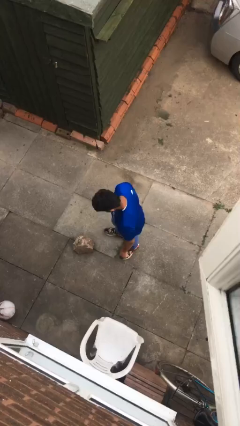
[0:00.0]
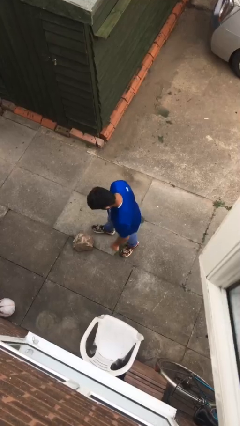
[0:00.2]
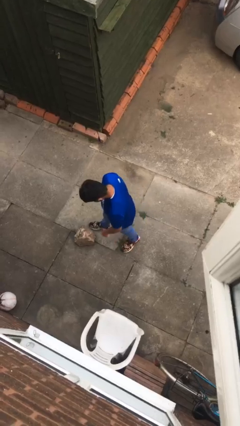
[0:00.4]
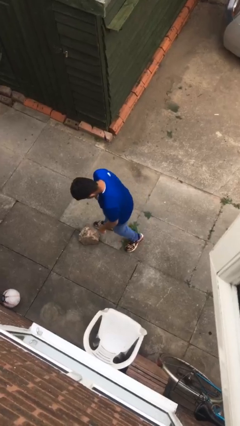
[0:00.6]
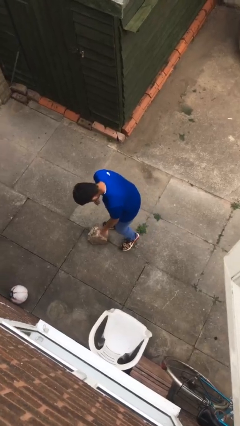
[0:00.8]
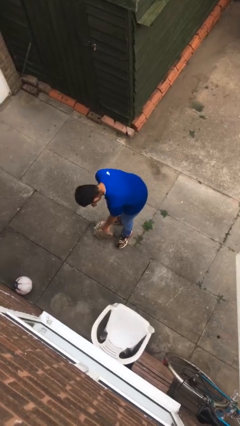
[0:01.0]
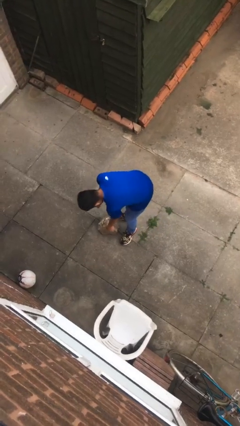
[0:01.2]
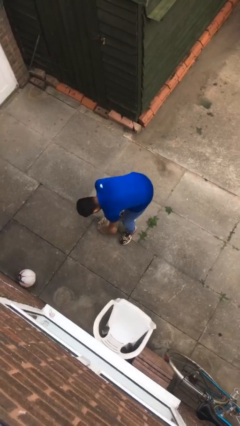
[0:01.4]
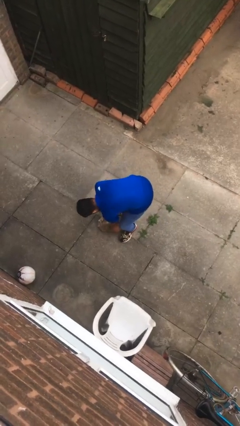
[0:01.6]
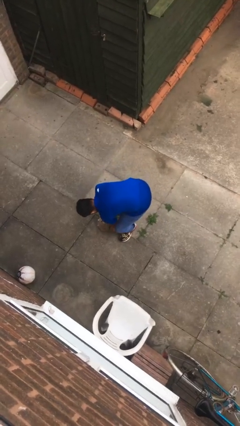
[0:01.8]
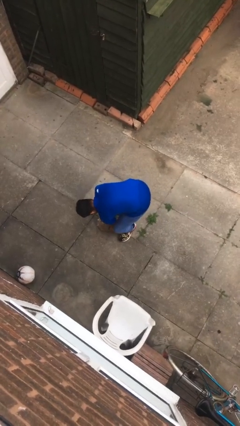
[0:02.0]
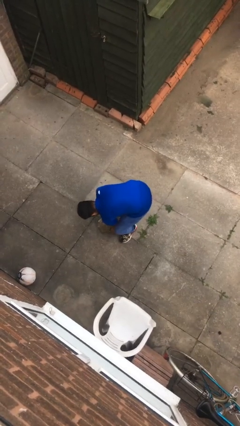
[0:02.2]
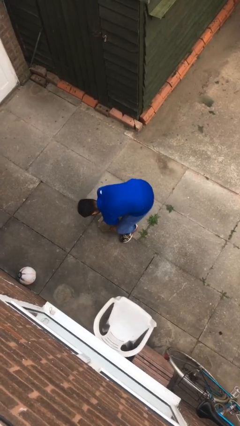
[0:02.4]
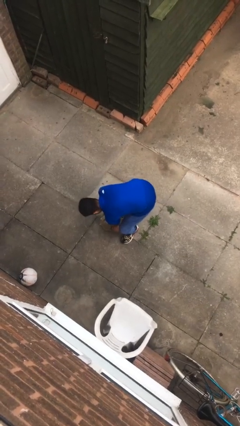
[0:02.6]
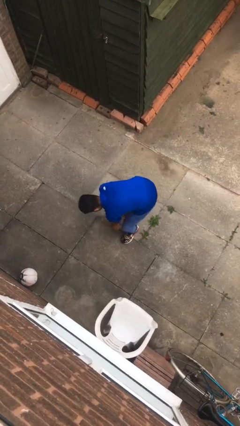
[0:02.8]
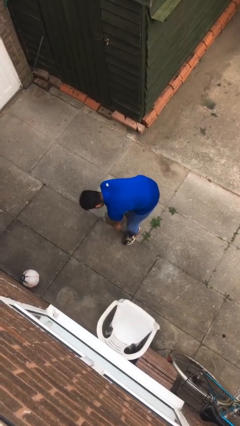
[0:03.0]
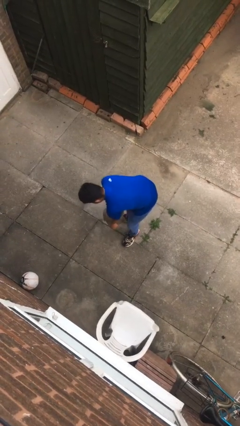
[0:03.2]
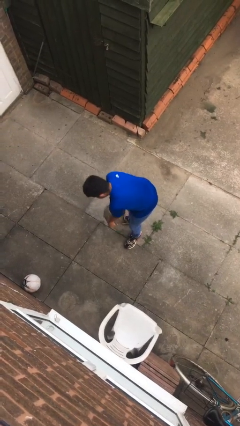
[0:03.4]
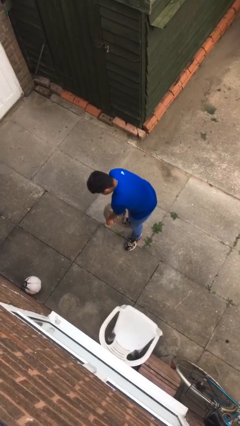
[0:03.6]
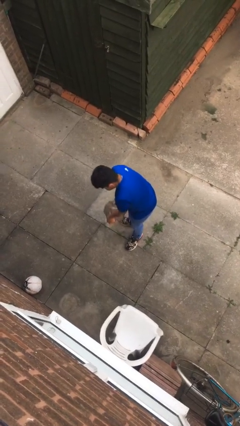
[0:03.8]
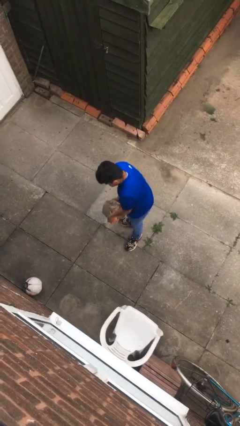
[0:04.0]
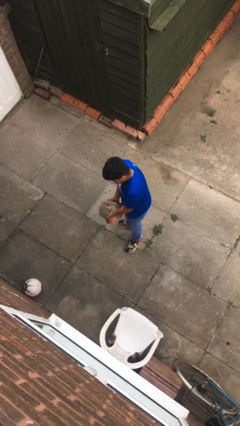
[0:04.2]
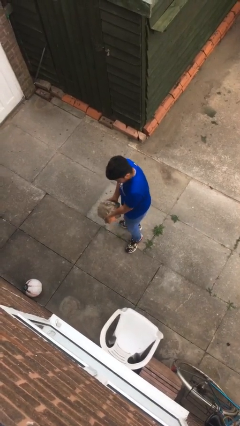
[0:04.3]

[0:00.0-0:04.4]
person picks up object from floor

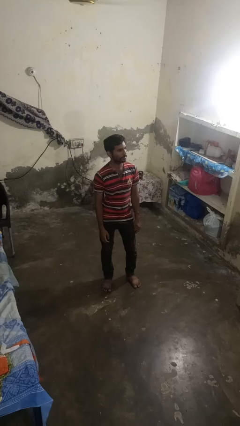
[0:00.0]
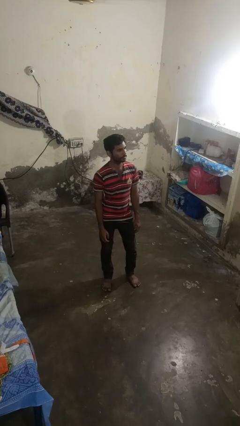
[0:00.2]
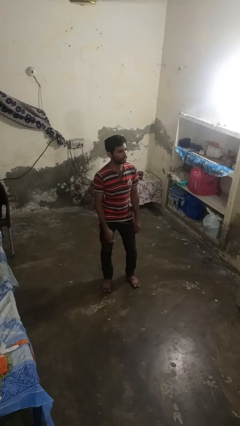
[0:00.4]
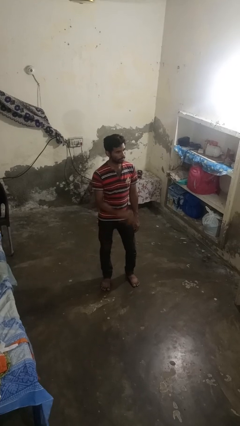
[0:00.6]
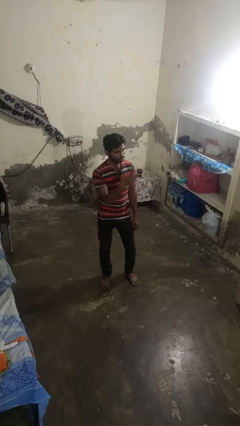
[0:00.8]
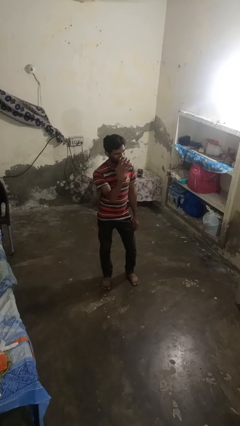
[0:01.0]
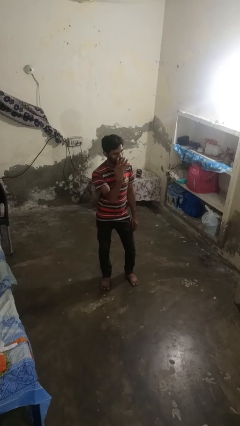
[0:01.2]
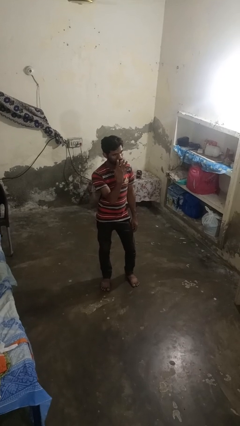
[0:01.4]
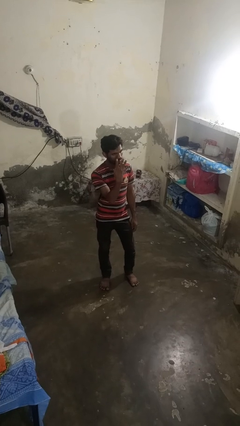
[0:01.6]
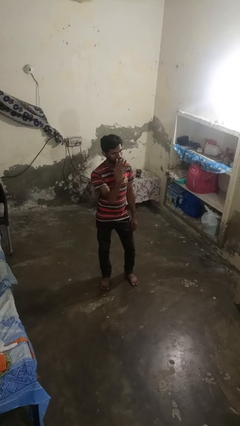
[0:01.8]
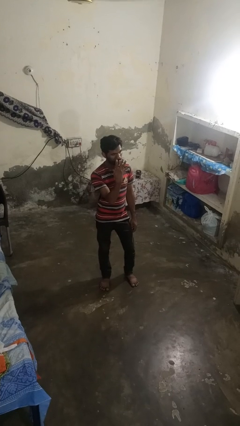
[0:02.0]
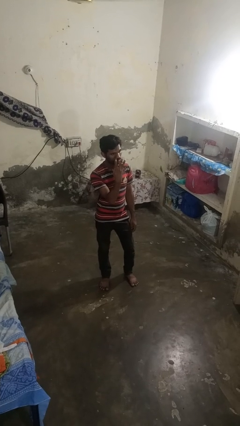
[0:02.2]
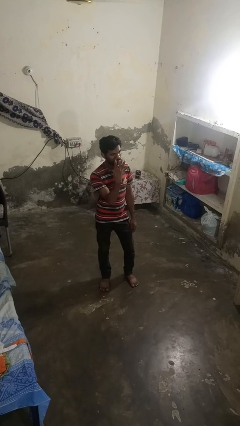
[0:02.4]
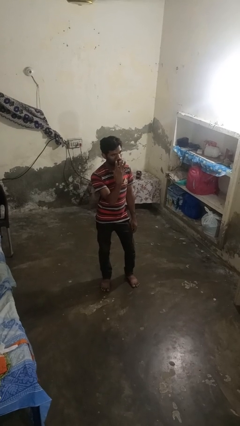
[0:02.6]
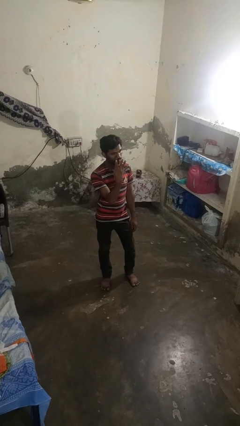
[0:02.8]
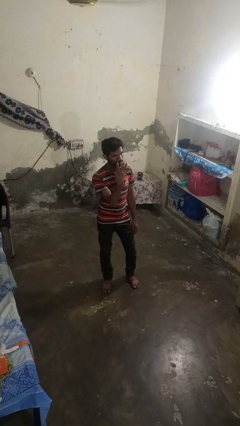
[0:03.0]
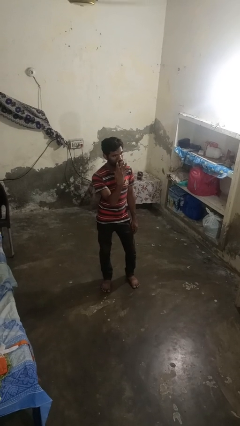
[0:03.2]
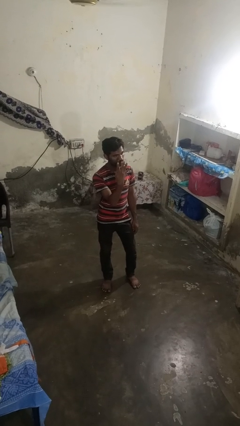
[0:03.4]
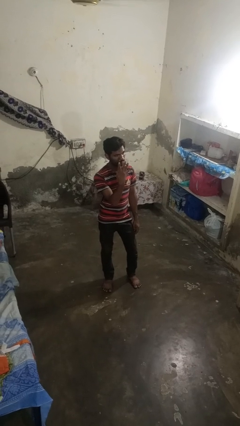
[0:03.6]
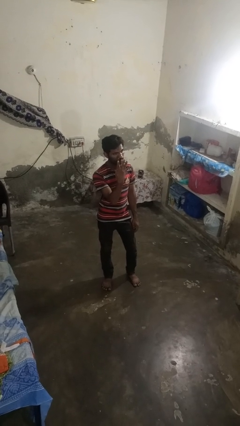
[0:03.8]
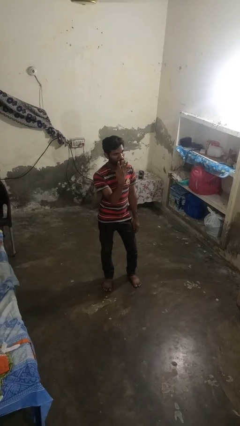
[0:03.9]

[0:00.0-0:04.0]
person gestures number four

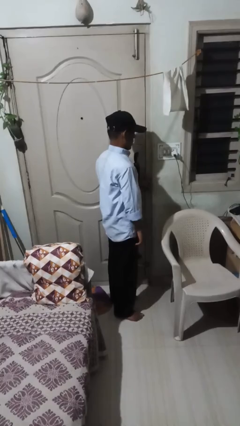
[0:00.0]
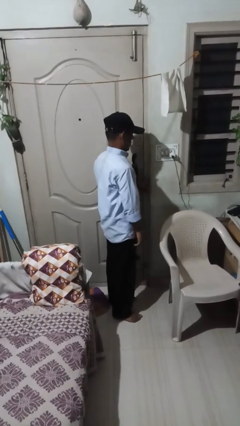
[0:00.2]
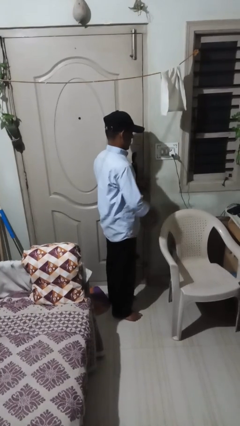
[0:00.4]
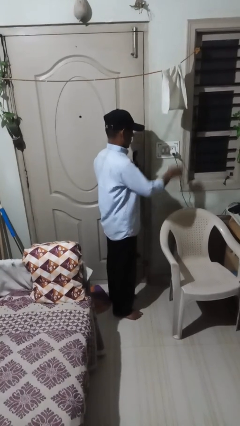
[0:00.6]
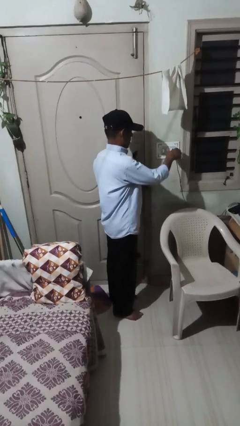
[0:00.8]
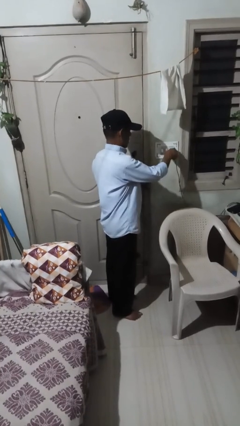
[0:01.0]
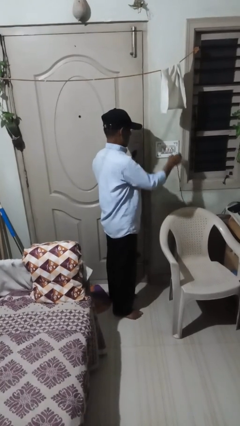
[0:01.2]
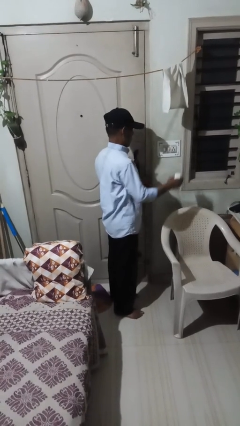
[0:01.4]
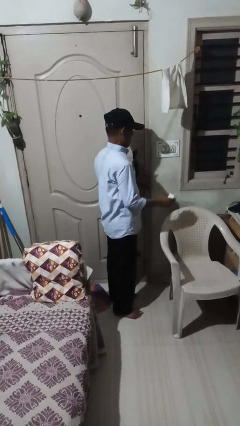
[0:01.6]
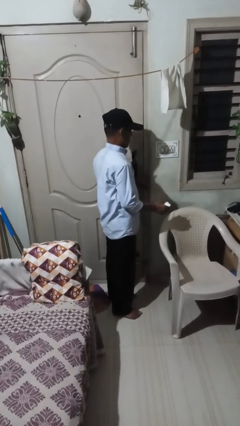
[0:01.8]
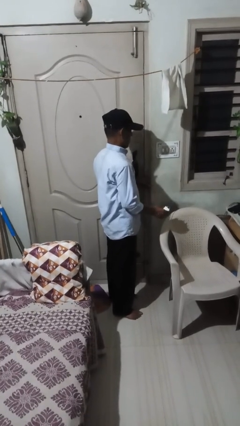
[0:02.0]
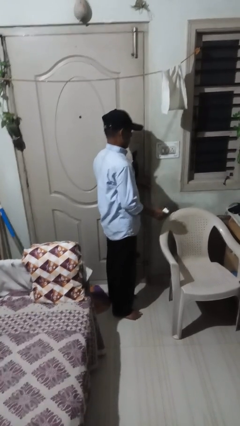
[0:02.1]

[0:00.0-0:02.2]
person unplugs from electrical socket

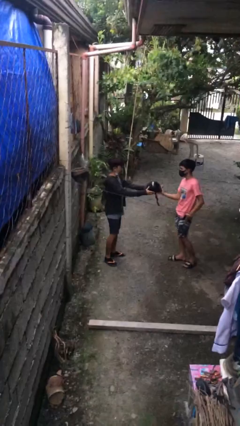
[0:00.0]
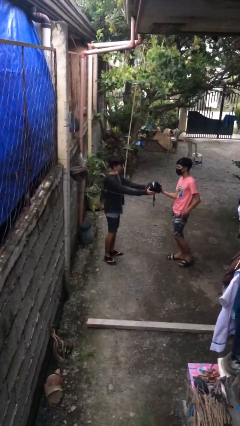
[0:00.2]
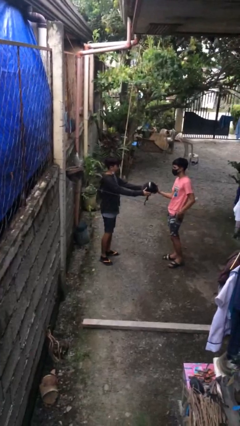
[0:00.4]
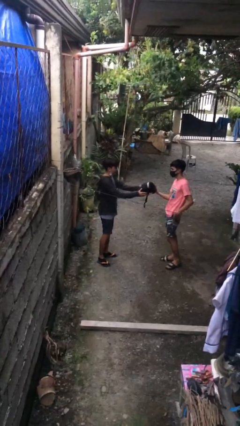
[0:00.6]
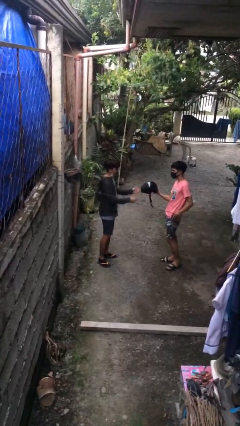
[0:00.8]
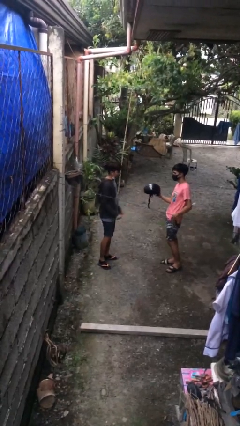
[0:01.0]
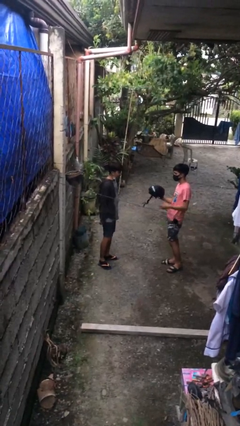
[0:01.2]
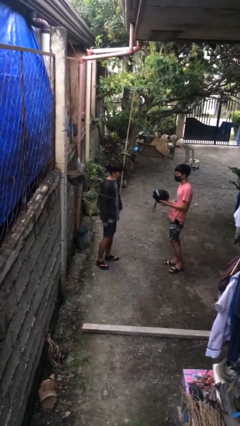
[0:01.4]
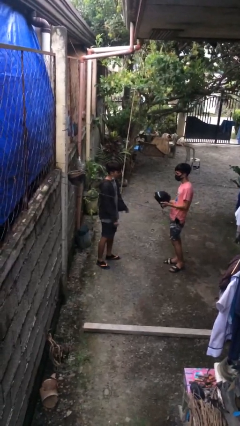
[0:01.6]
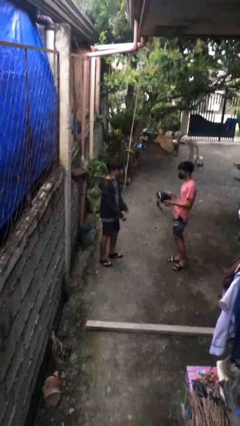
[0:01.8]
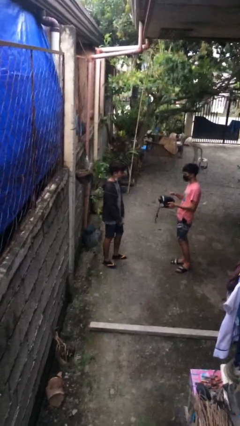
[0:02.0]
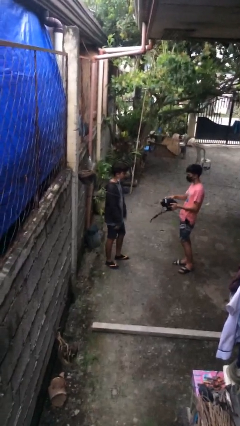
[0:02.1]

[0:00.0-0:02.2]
person transfers object to person

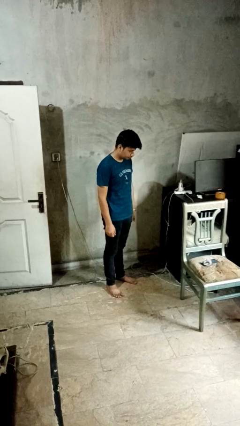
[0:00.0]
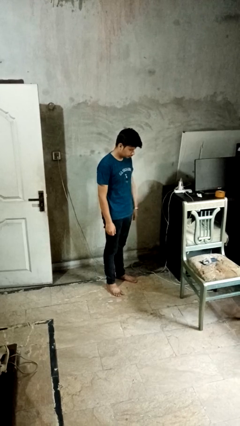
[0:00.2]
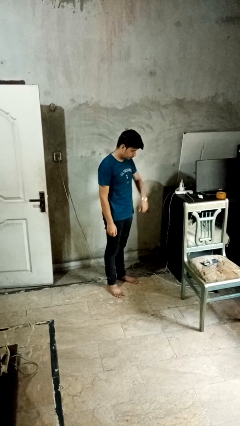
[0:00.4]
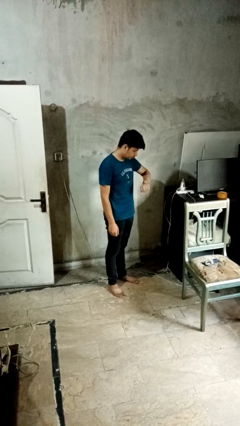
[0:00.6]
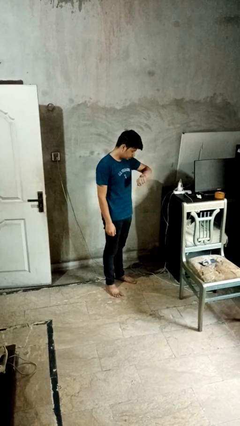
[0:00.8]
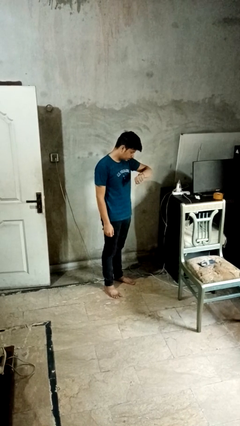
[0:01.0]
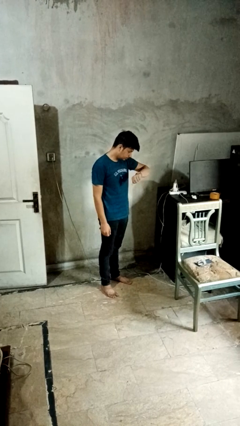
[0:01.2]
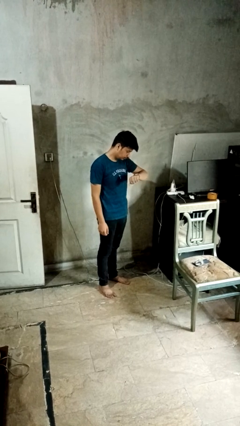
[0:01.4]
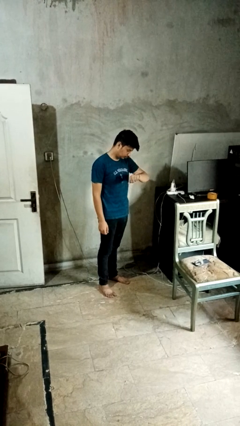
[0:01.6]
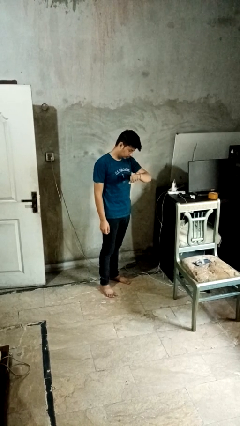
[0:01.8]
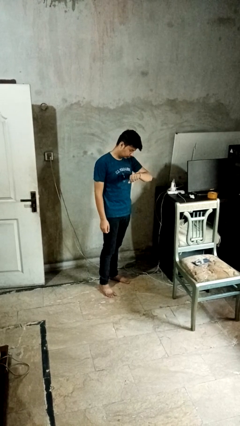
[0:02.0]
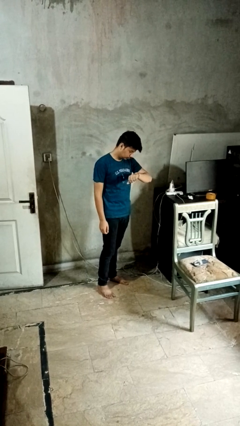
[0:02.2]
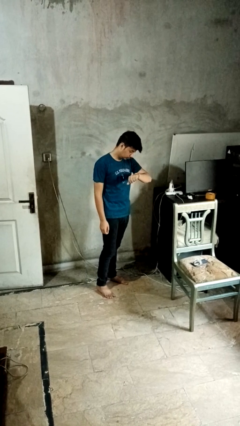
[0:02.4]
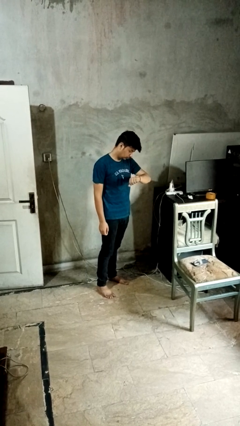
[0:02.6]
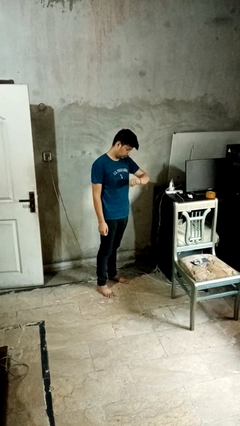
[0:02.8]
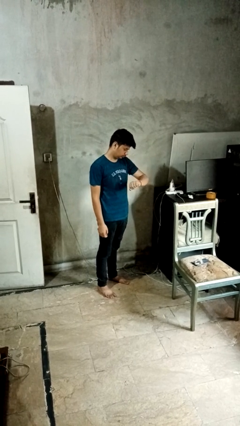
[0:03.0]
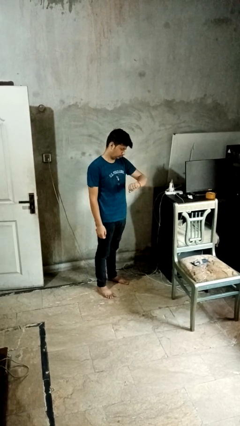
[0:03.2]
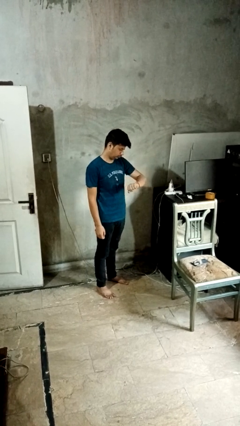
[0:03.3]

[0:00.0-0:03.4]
person looks at wristwatch

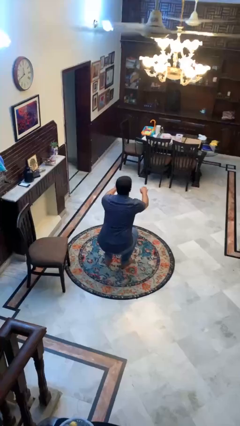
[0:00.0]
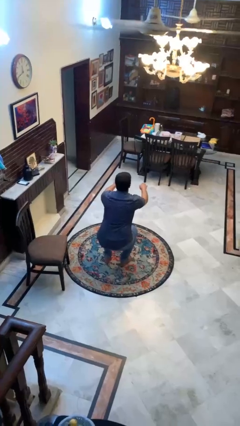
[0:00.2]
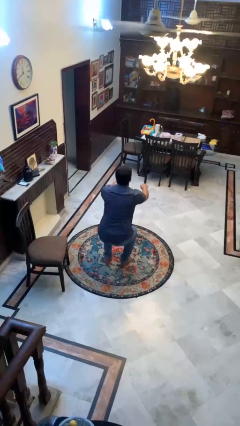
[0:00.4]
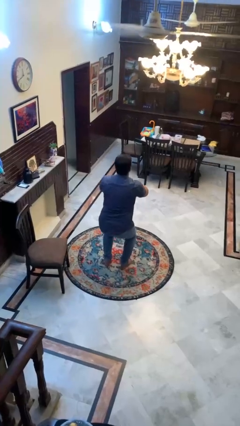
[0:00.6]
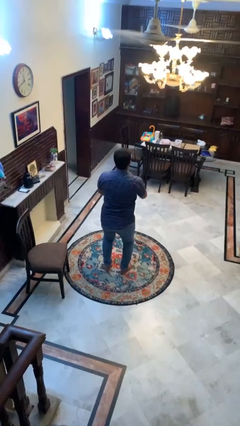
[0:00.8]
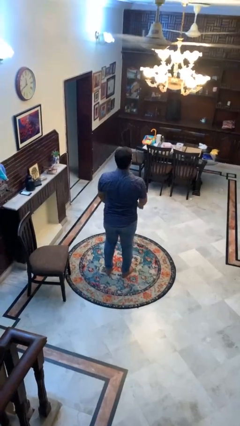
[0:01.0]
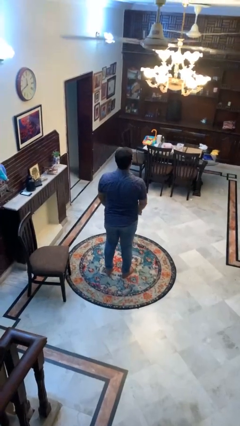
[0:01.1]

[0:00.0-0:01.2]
person stands up
